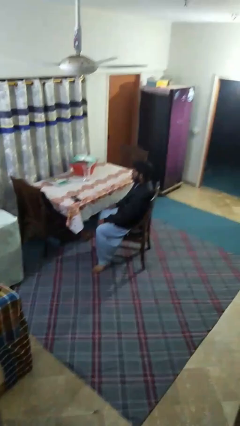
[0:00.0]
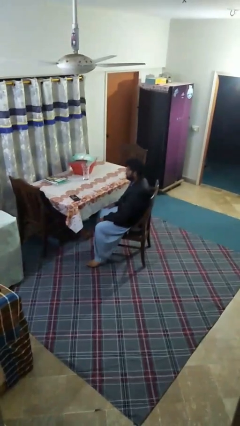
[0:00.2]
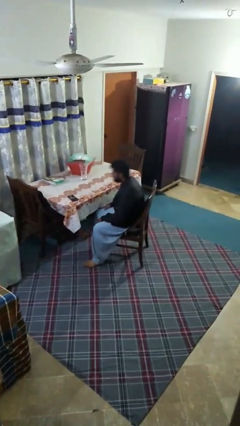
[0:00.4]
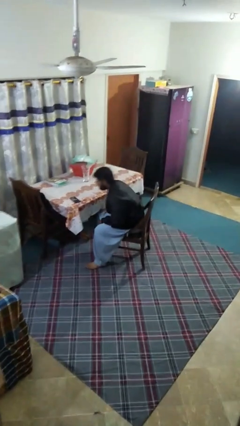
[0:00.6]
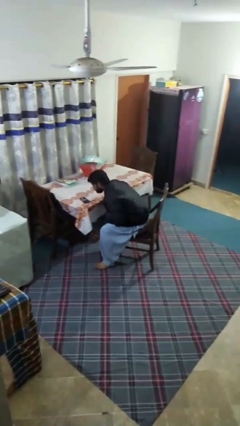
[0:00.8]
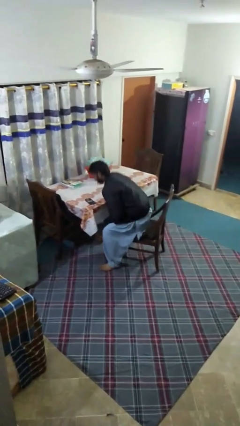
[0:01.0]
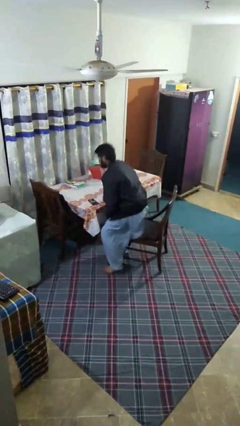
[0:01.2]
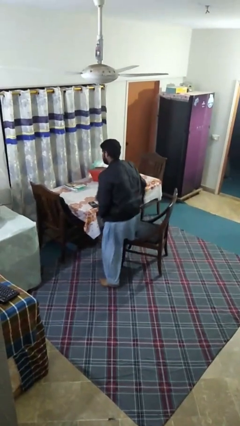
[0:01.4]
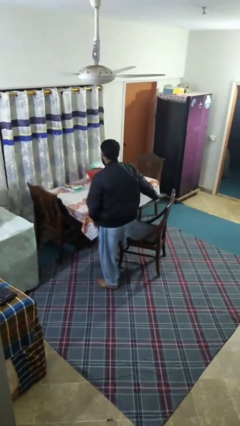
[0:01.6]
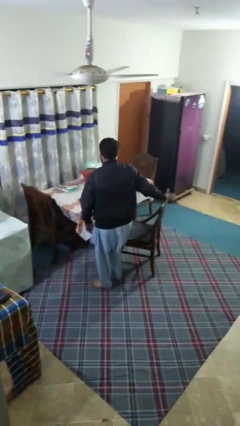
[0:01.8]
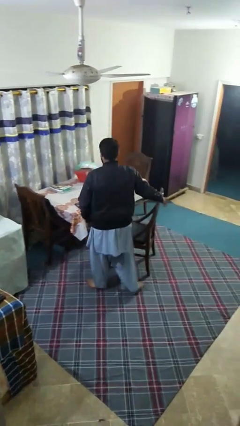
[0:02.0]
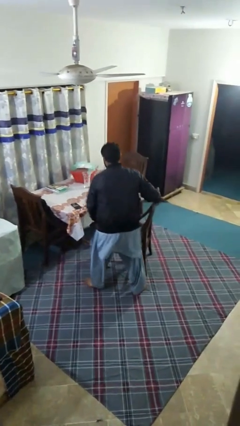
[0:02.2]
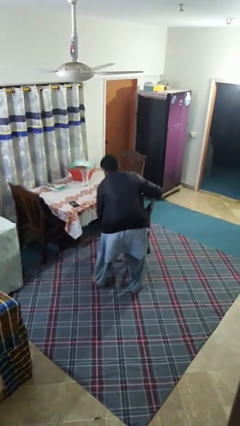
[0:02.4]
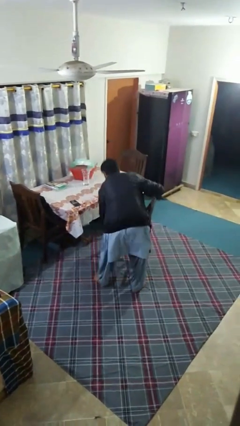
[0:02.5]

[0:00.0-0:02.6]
person stands up

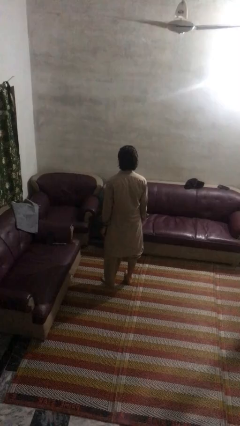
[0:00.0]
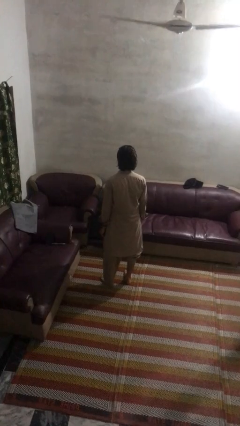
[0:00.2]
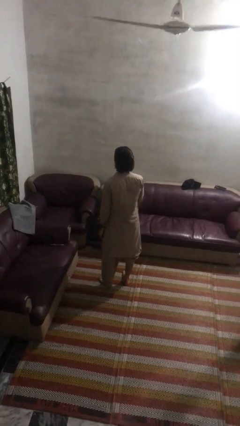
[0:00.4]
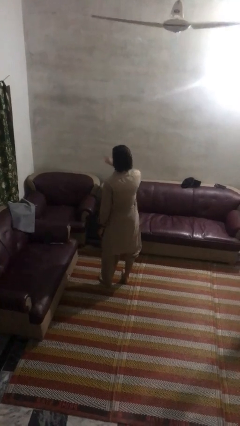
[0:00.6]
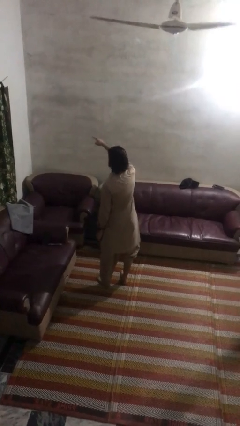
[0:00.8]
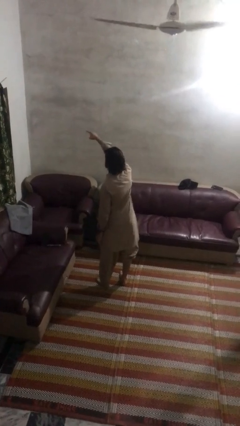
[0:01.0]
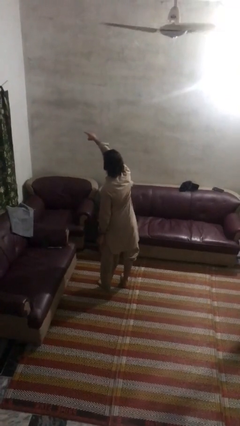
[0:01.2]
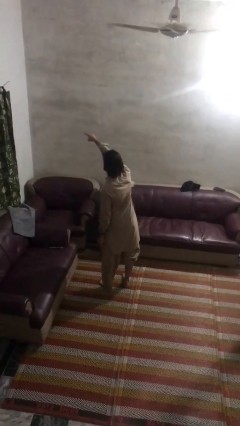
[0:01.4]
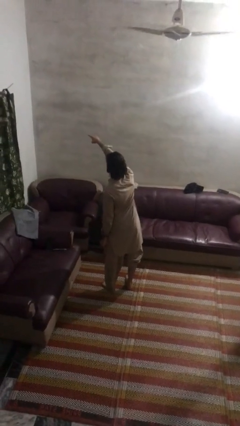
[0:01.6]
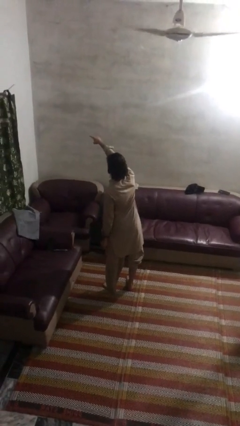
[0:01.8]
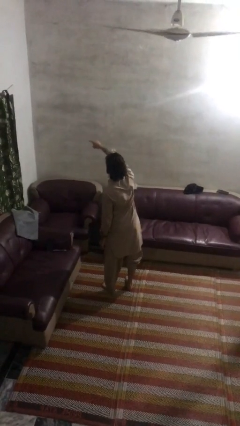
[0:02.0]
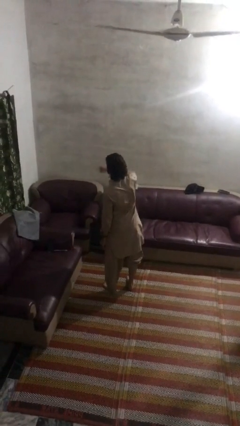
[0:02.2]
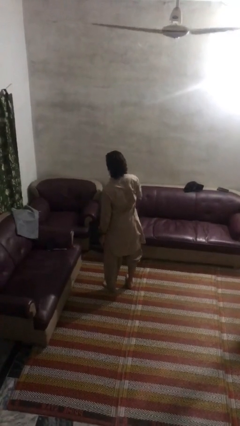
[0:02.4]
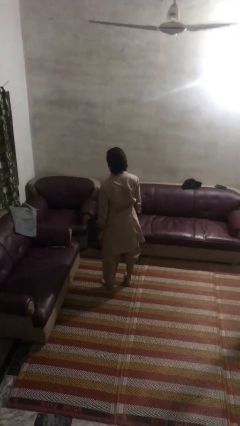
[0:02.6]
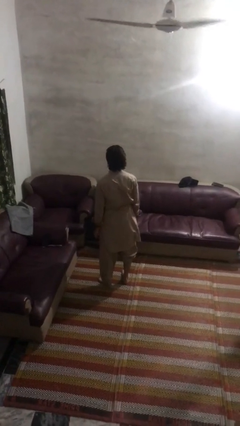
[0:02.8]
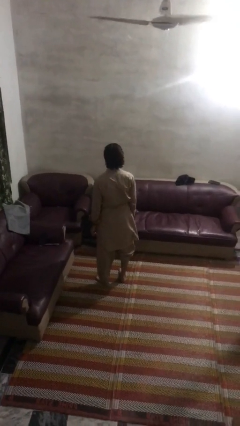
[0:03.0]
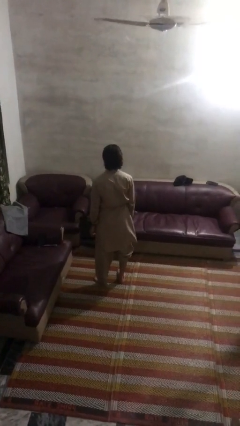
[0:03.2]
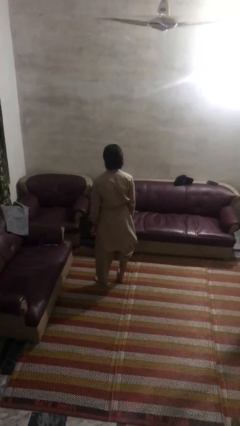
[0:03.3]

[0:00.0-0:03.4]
person points at person

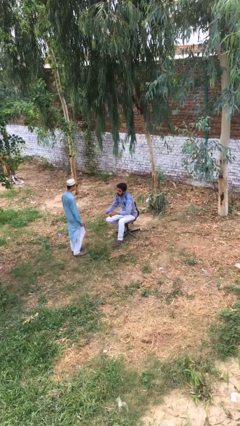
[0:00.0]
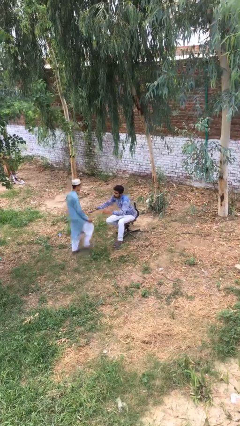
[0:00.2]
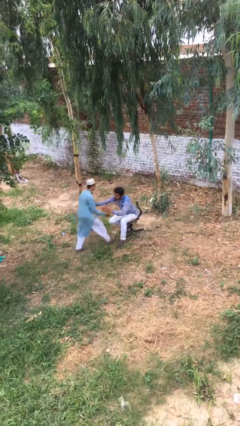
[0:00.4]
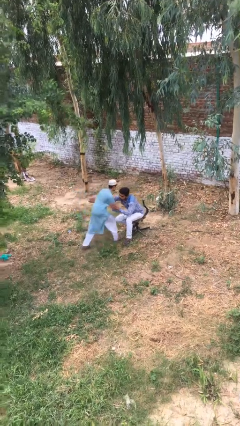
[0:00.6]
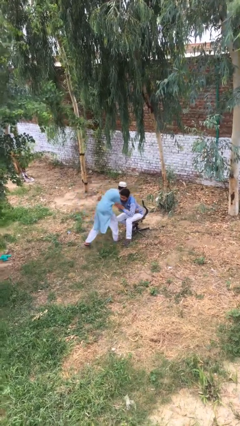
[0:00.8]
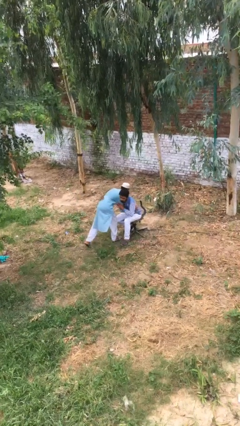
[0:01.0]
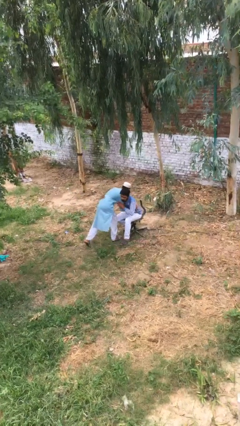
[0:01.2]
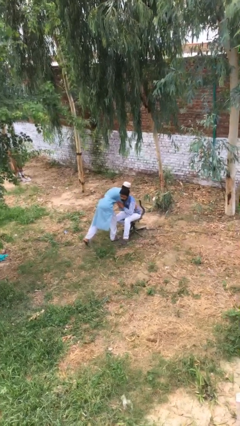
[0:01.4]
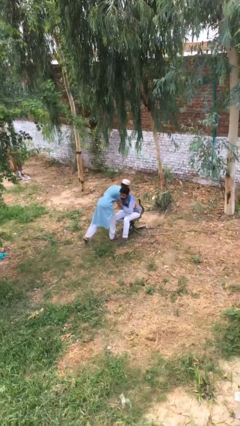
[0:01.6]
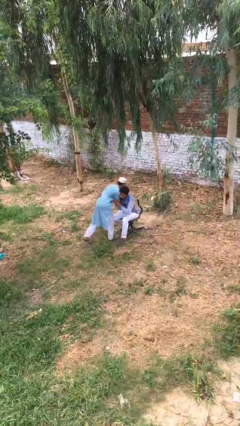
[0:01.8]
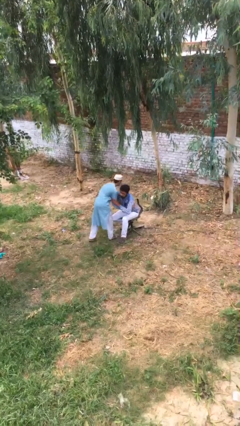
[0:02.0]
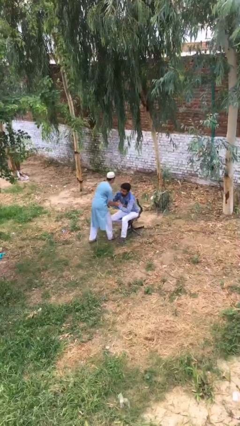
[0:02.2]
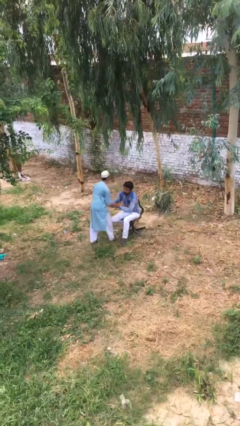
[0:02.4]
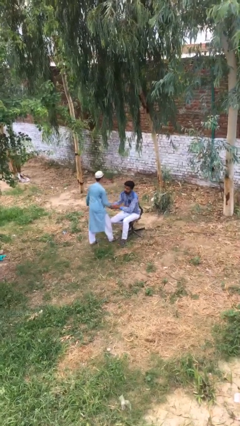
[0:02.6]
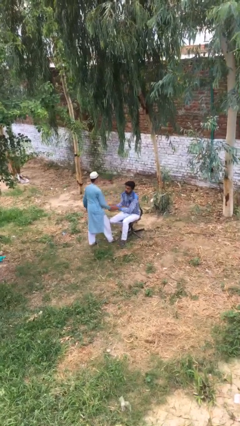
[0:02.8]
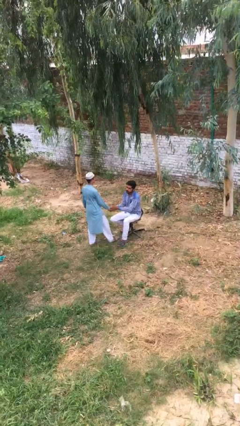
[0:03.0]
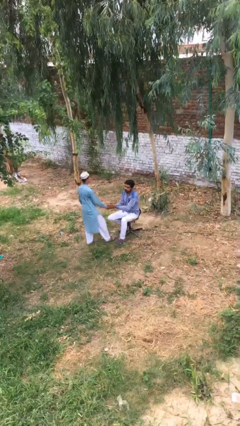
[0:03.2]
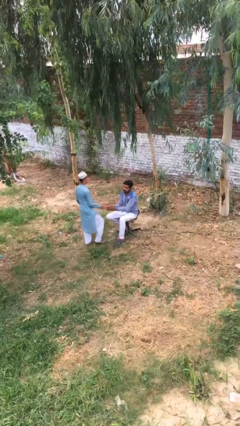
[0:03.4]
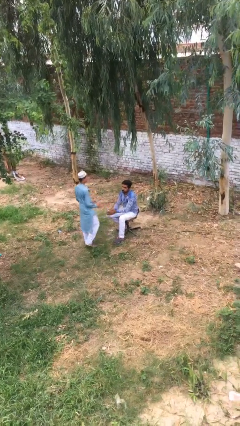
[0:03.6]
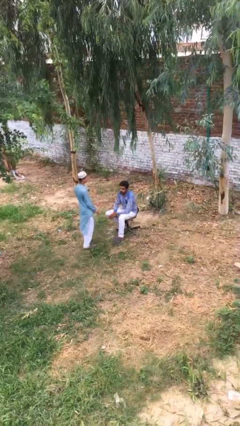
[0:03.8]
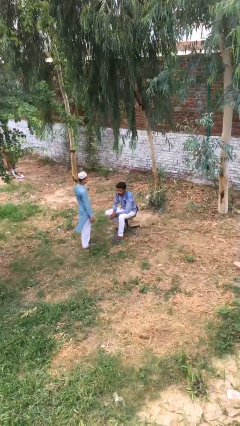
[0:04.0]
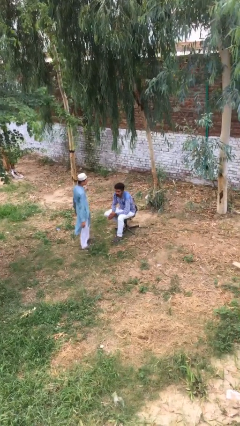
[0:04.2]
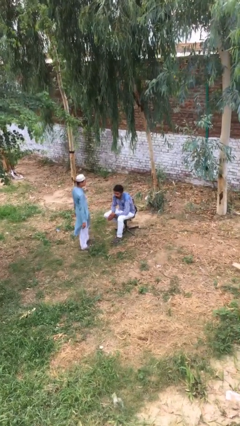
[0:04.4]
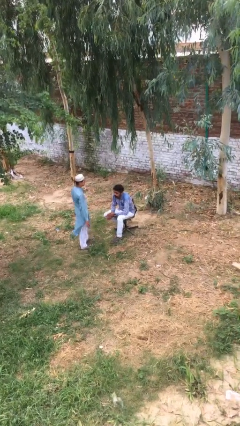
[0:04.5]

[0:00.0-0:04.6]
person embraces person

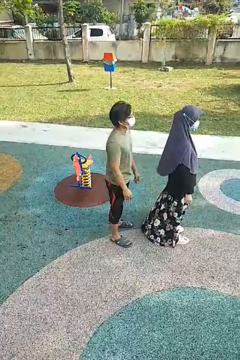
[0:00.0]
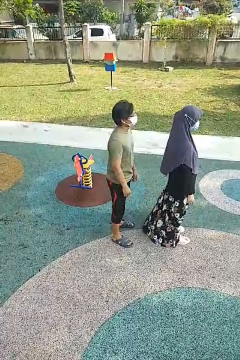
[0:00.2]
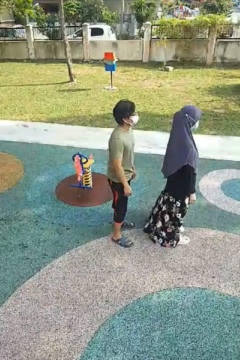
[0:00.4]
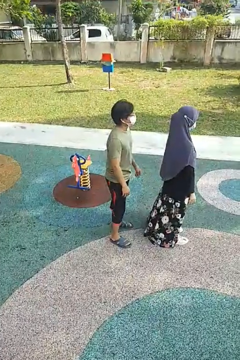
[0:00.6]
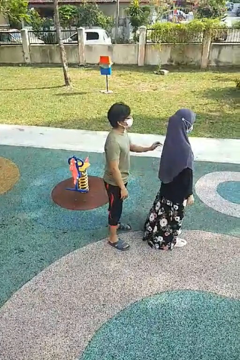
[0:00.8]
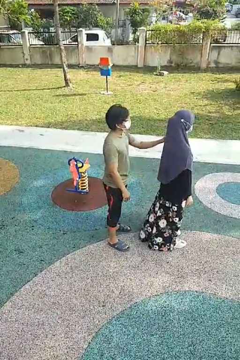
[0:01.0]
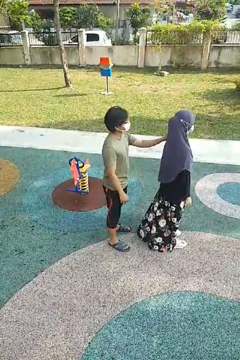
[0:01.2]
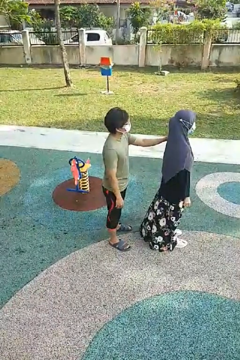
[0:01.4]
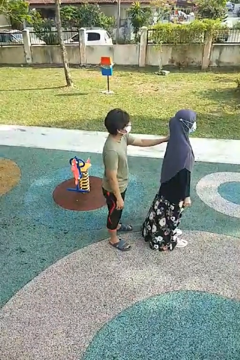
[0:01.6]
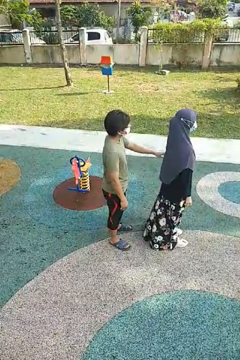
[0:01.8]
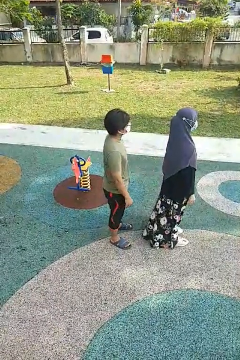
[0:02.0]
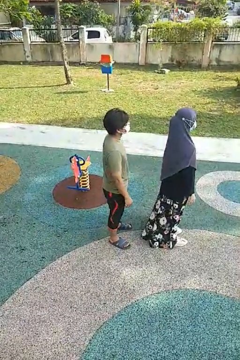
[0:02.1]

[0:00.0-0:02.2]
person touches back of person

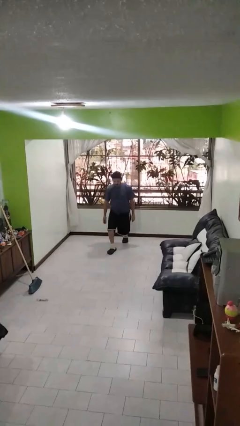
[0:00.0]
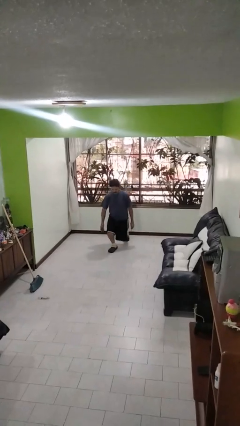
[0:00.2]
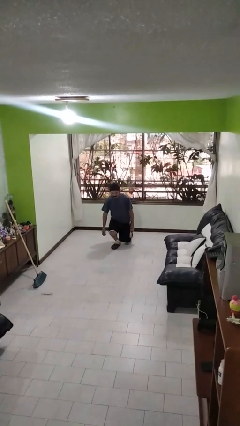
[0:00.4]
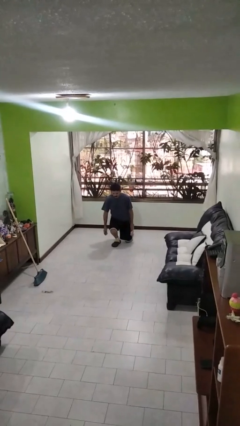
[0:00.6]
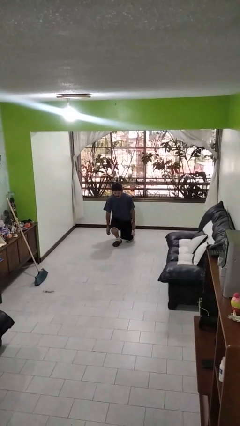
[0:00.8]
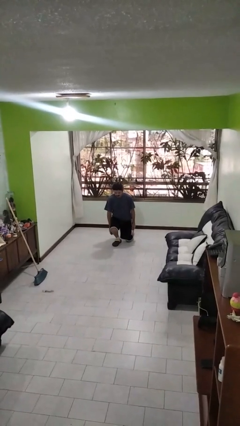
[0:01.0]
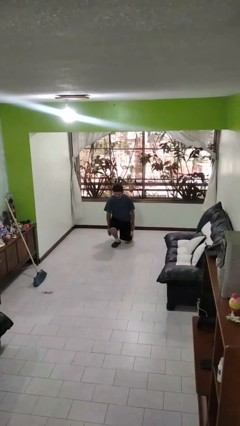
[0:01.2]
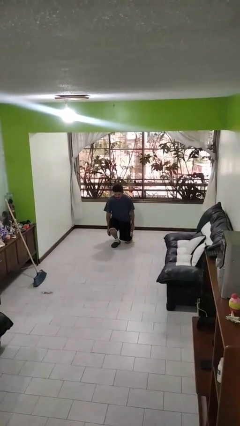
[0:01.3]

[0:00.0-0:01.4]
person kneels

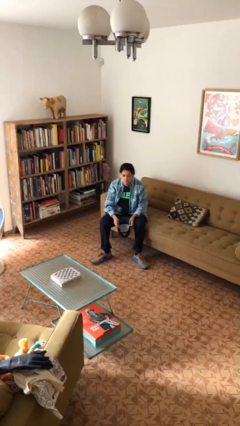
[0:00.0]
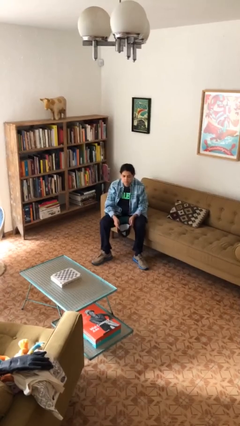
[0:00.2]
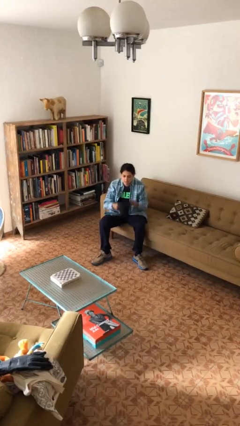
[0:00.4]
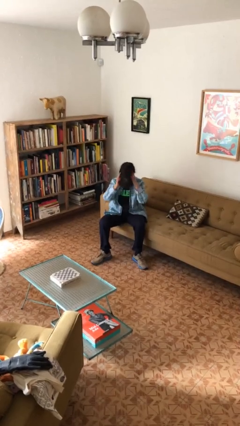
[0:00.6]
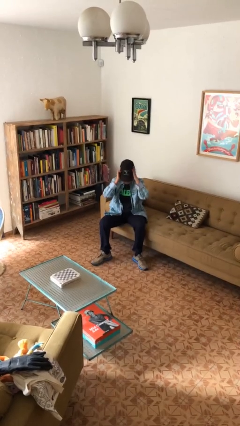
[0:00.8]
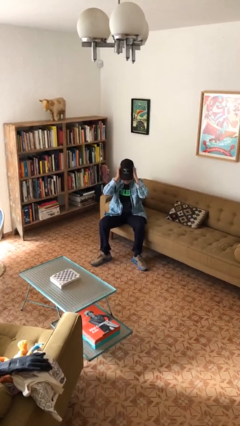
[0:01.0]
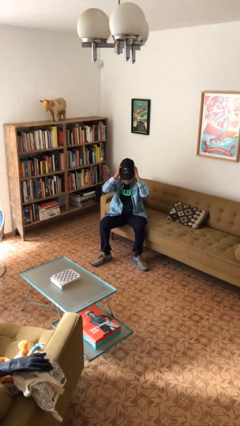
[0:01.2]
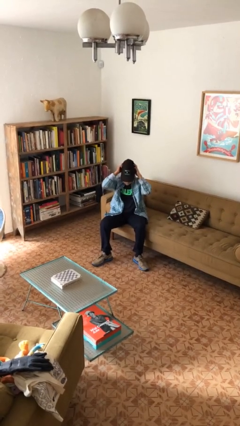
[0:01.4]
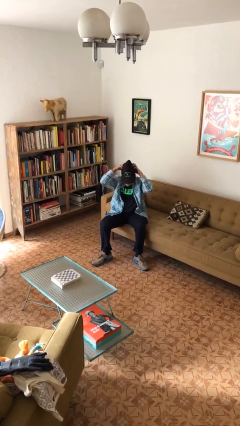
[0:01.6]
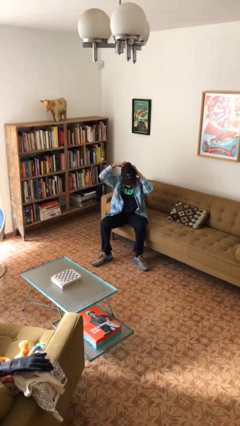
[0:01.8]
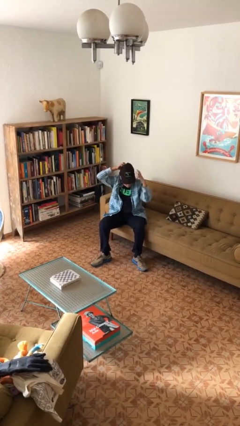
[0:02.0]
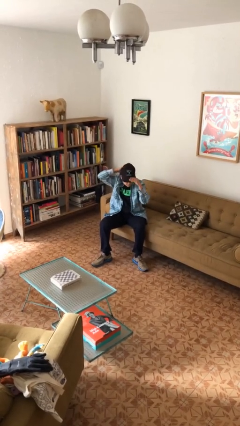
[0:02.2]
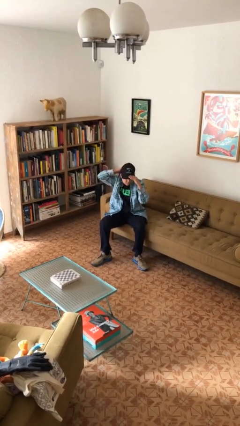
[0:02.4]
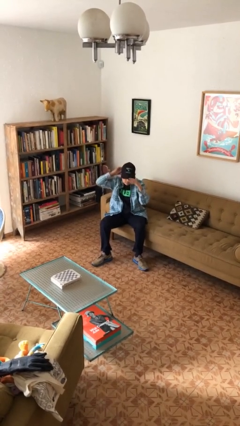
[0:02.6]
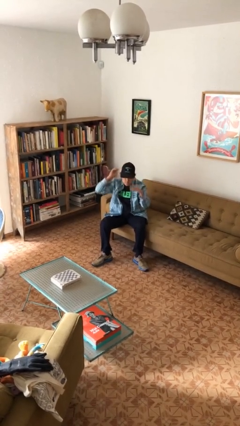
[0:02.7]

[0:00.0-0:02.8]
person puts on hat

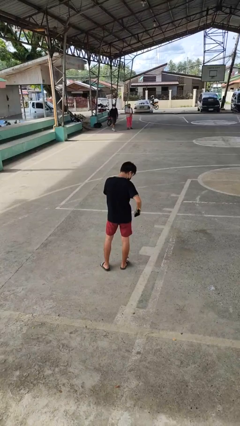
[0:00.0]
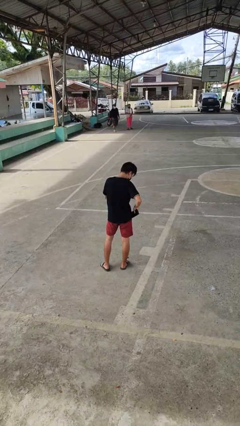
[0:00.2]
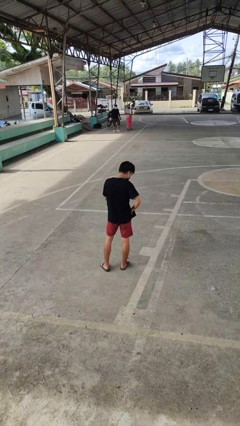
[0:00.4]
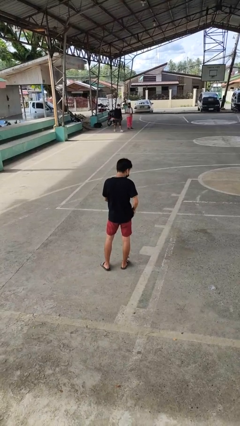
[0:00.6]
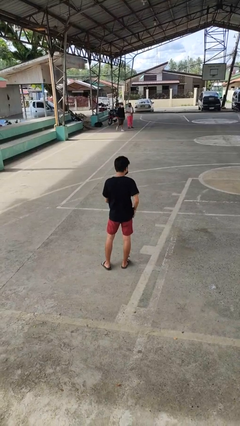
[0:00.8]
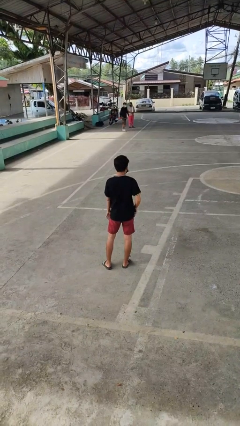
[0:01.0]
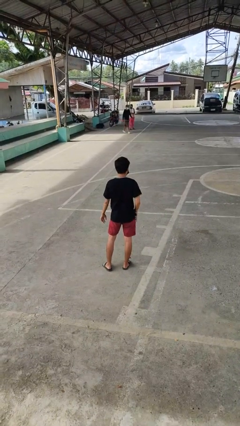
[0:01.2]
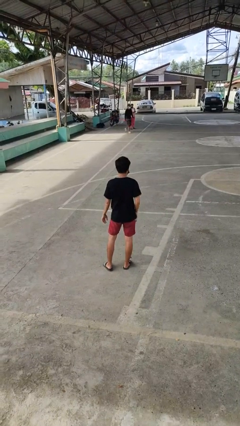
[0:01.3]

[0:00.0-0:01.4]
person puts phone into pocket
